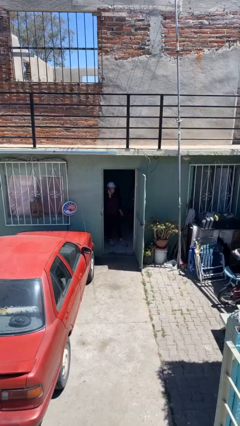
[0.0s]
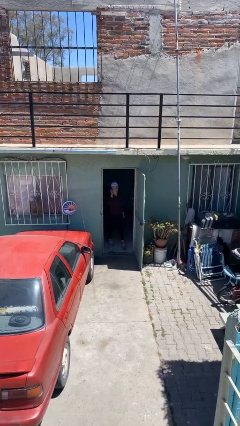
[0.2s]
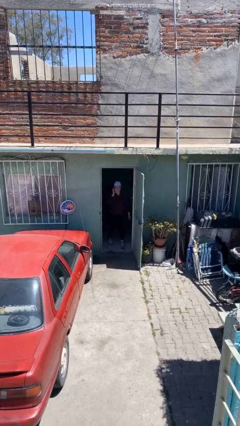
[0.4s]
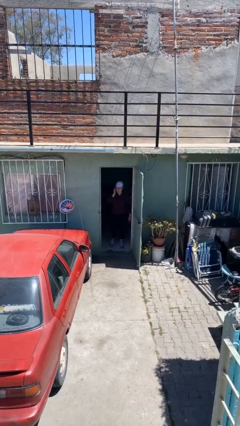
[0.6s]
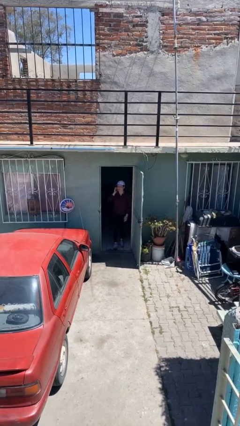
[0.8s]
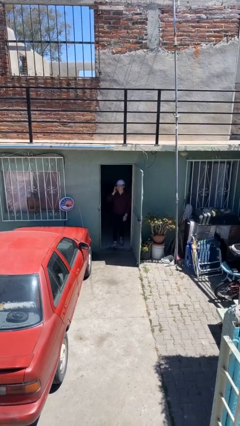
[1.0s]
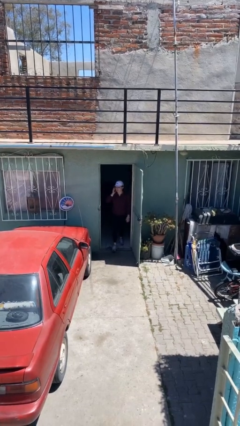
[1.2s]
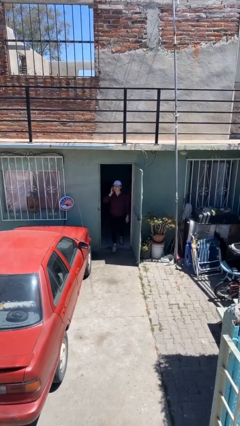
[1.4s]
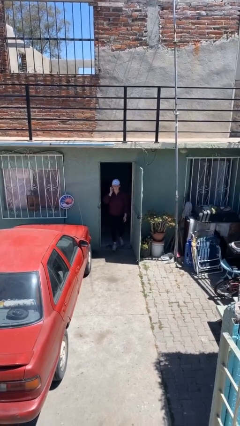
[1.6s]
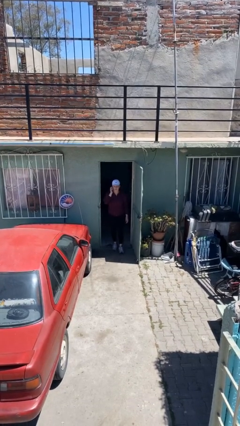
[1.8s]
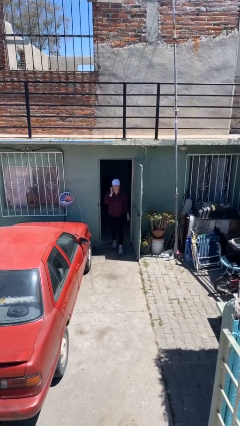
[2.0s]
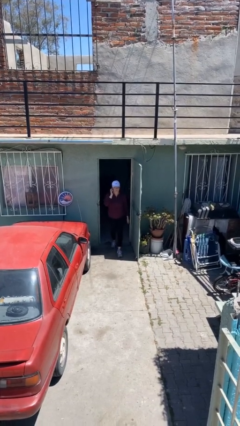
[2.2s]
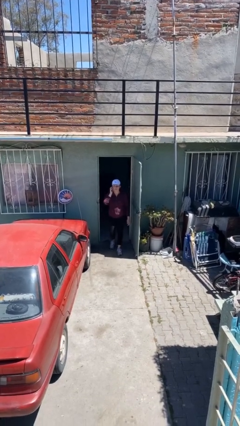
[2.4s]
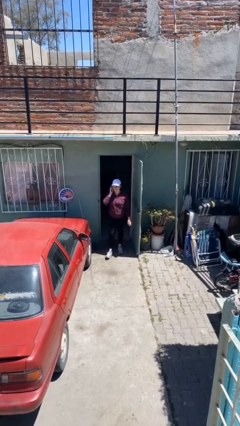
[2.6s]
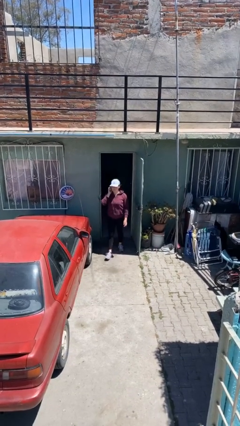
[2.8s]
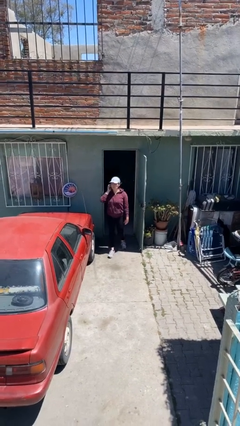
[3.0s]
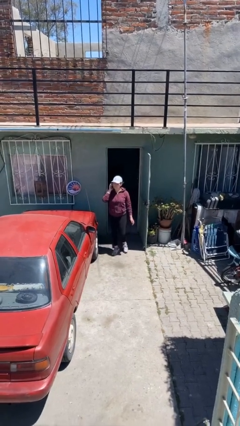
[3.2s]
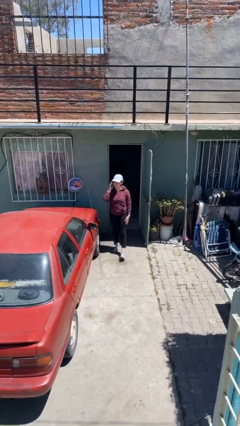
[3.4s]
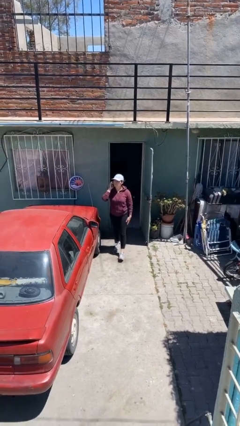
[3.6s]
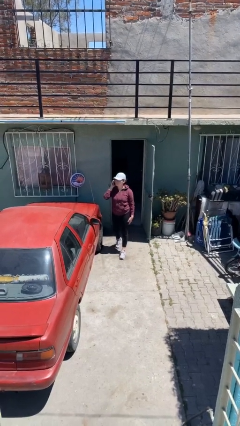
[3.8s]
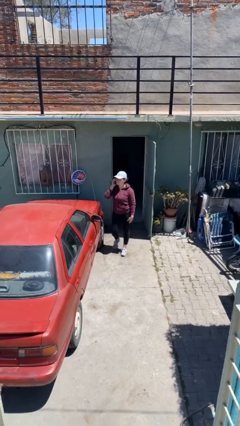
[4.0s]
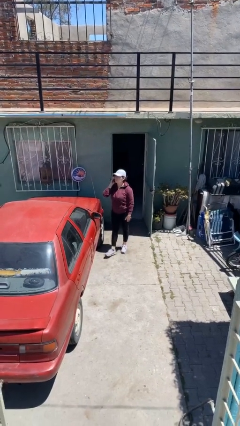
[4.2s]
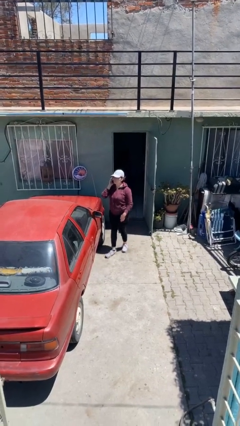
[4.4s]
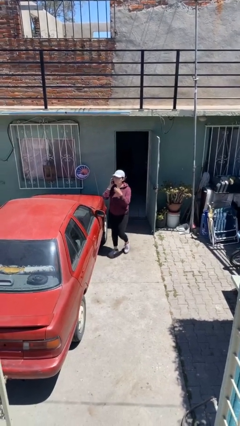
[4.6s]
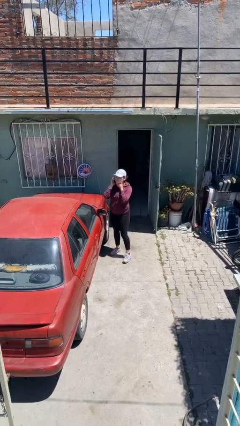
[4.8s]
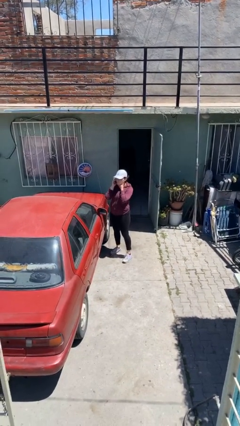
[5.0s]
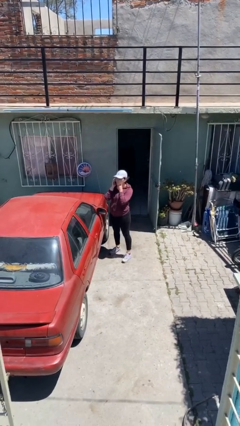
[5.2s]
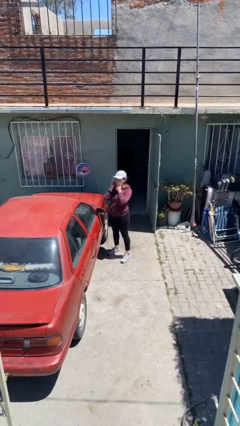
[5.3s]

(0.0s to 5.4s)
person enters scene through structure

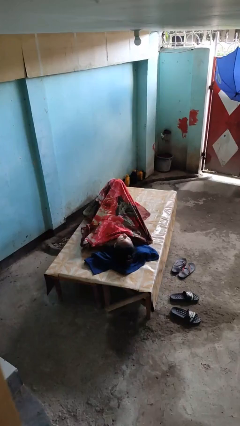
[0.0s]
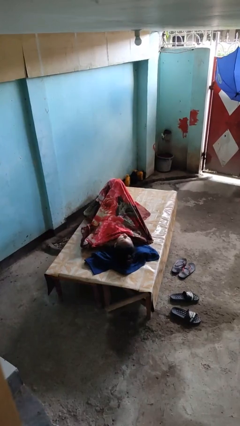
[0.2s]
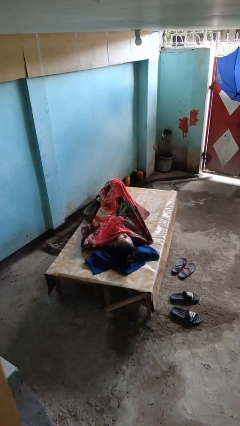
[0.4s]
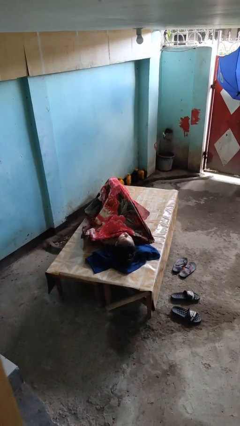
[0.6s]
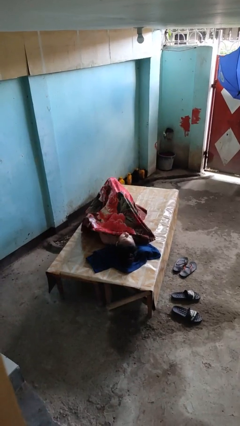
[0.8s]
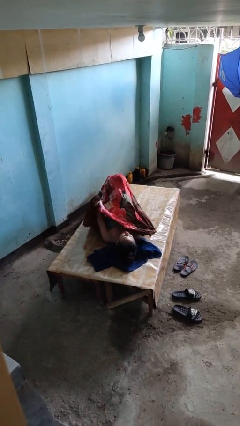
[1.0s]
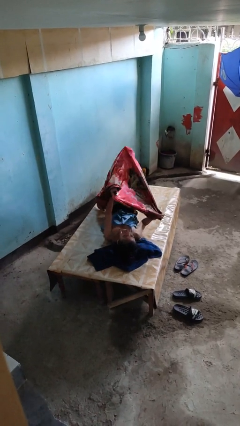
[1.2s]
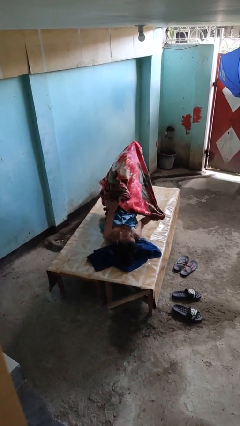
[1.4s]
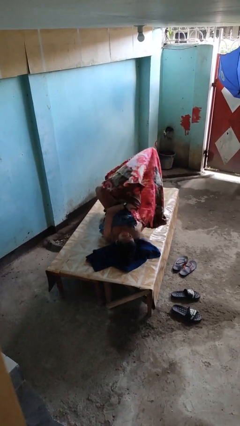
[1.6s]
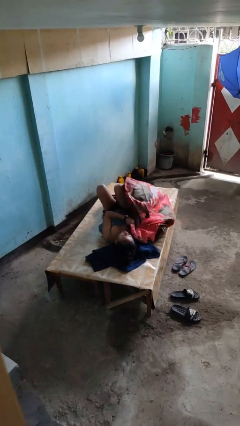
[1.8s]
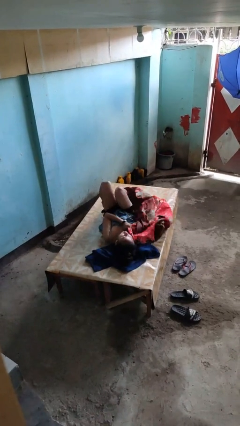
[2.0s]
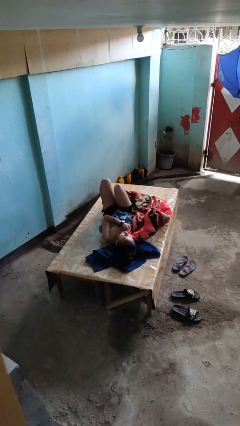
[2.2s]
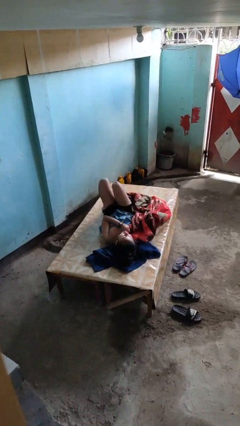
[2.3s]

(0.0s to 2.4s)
person uncovers with blanket

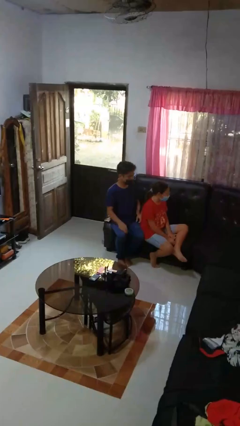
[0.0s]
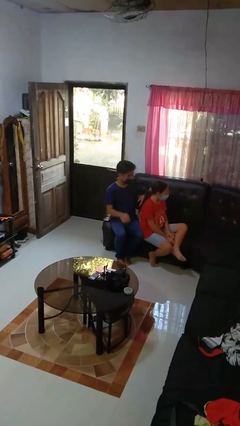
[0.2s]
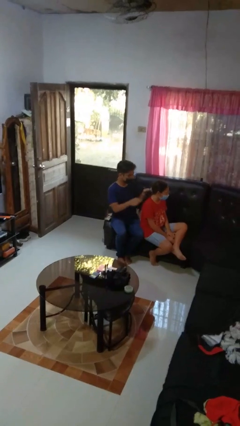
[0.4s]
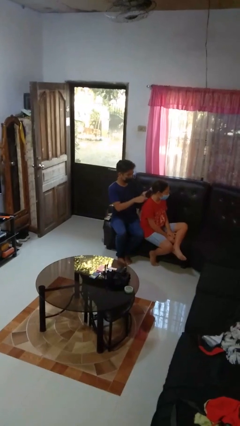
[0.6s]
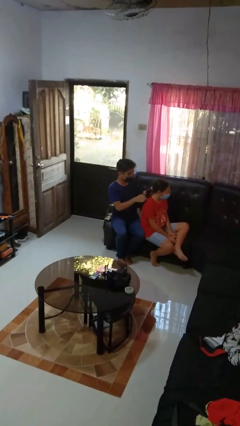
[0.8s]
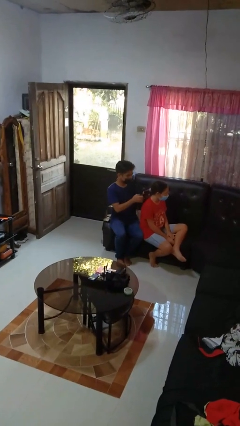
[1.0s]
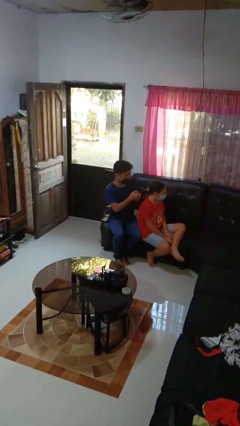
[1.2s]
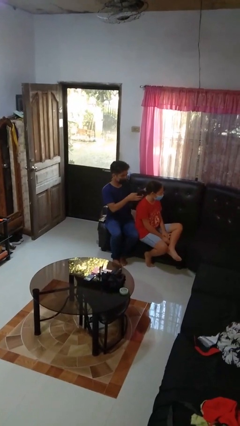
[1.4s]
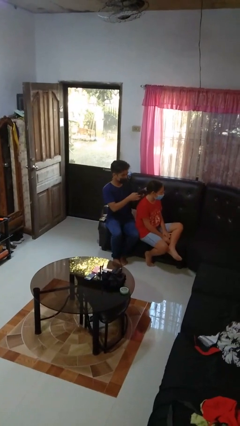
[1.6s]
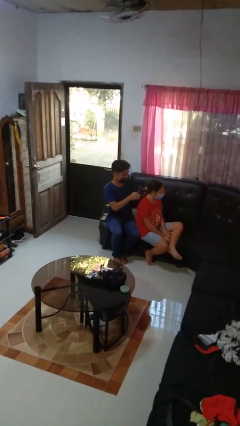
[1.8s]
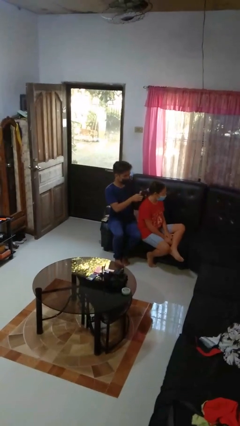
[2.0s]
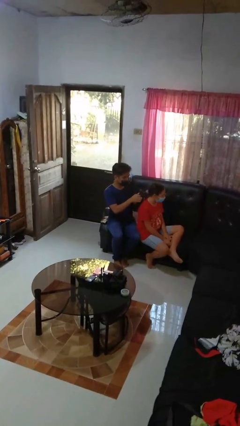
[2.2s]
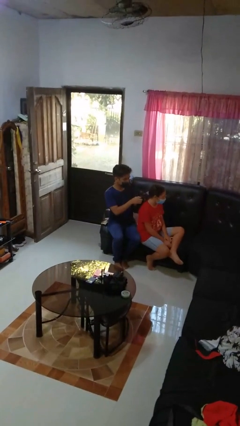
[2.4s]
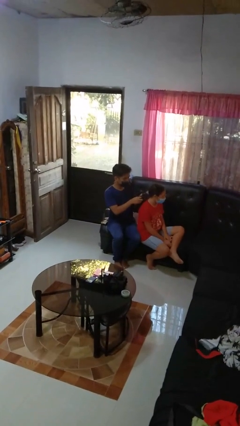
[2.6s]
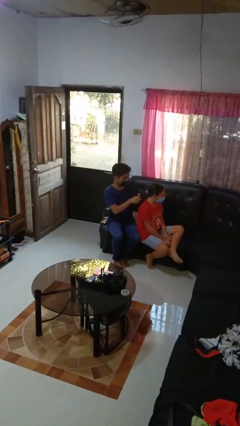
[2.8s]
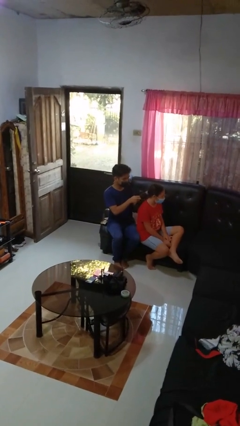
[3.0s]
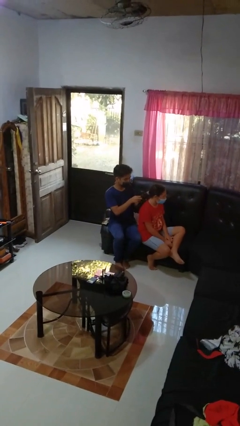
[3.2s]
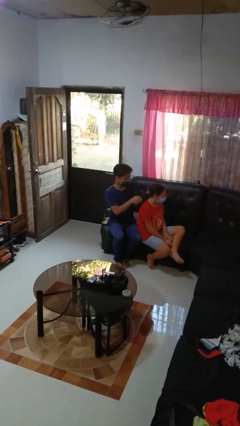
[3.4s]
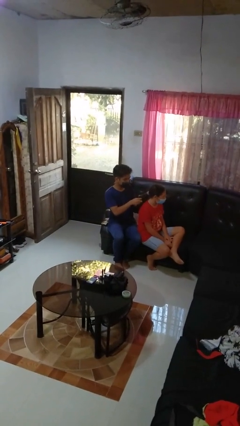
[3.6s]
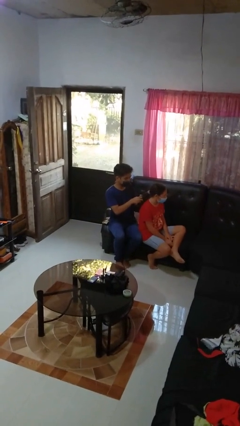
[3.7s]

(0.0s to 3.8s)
person braids hair of person

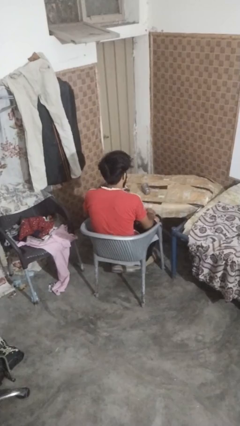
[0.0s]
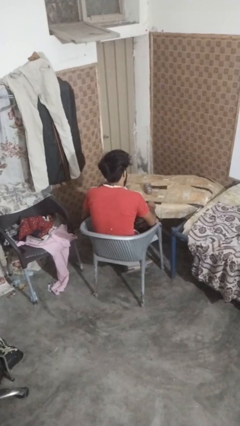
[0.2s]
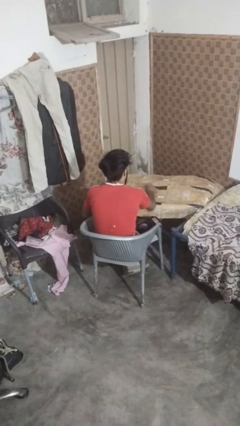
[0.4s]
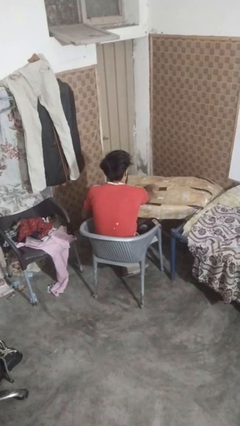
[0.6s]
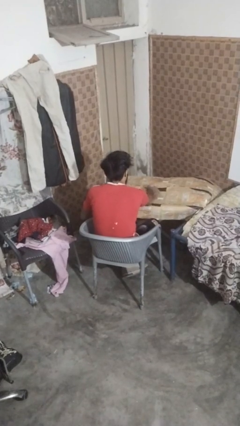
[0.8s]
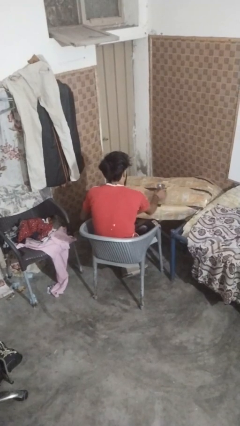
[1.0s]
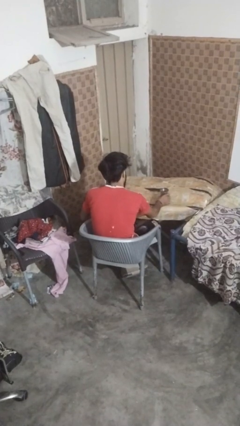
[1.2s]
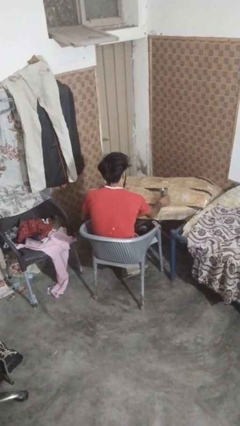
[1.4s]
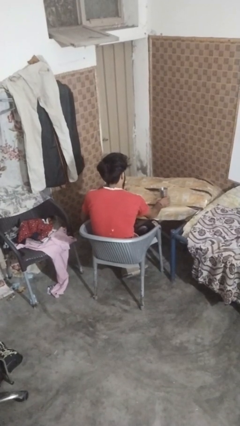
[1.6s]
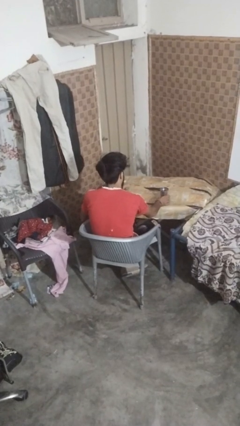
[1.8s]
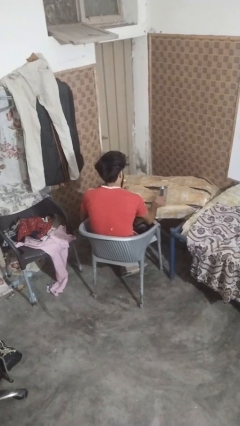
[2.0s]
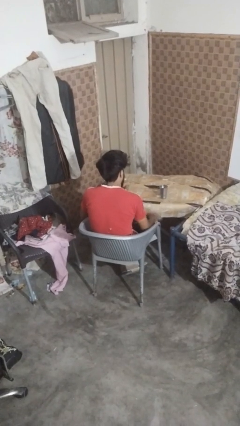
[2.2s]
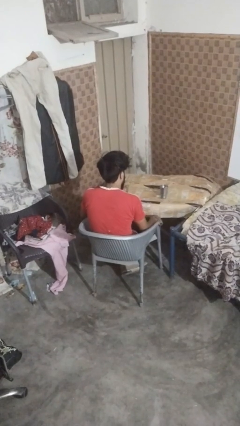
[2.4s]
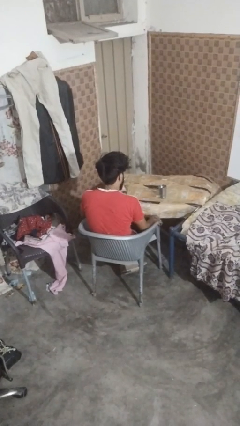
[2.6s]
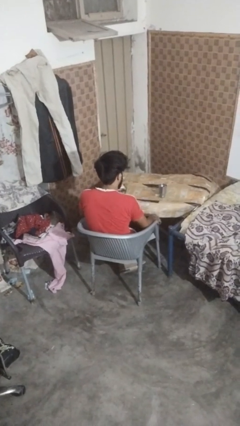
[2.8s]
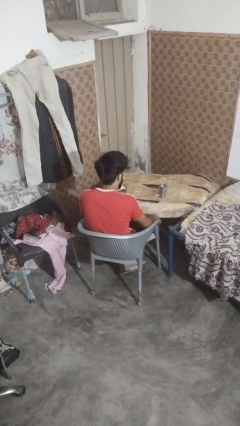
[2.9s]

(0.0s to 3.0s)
person sets upright glass

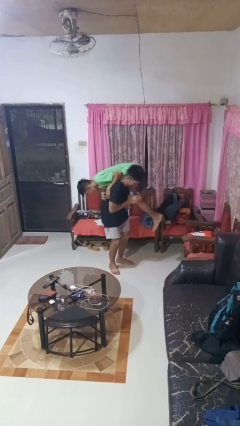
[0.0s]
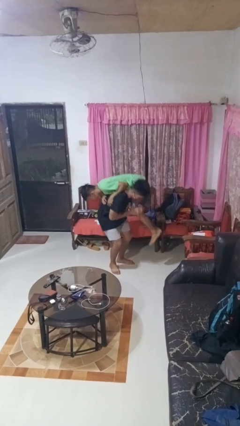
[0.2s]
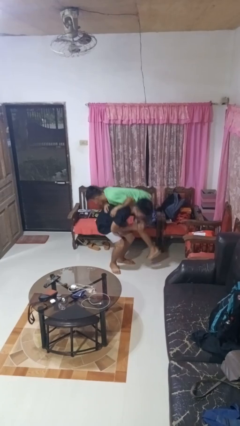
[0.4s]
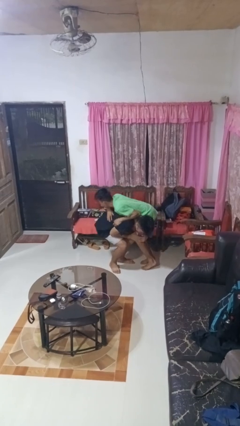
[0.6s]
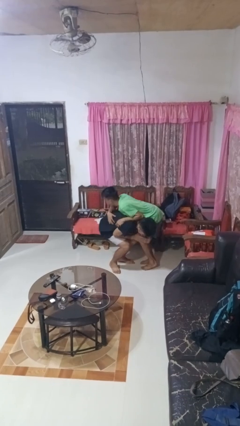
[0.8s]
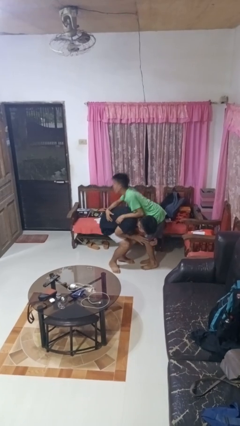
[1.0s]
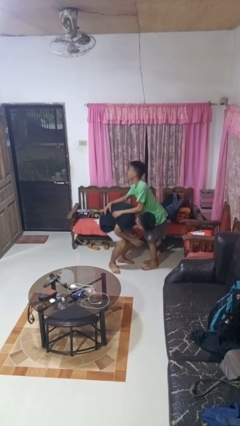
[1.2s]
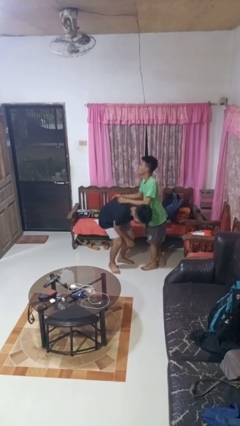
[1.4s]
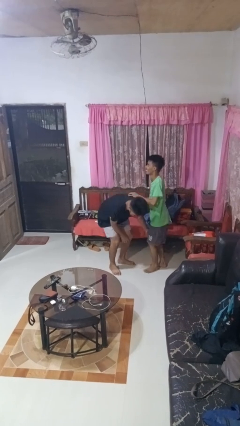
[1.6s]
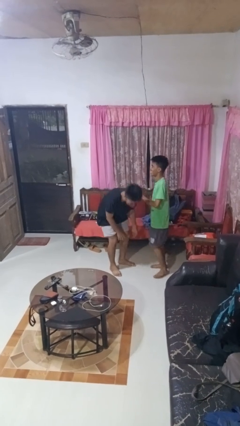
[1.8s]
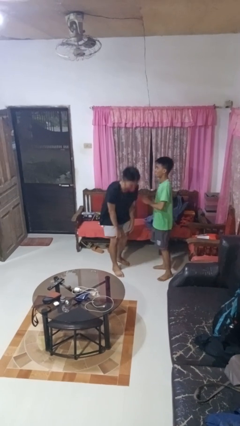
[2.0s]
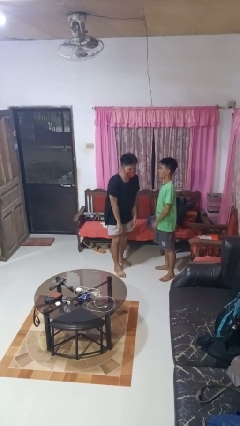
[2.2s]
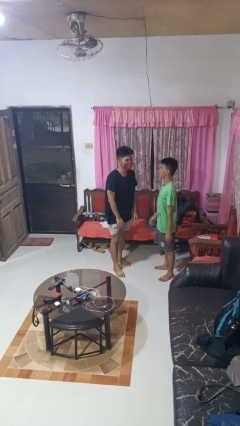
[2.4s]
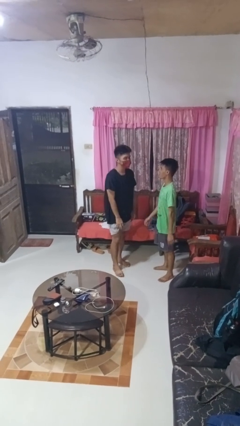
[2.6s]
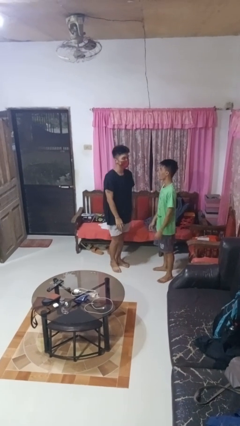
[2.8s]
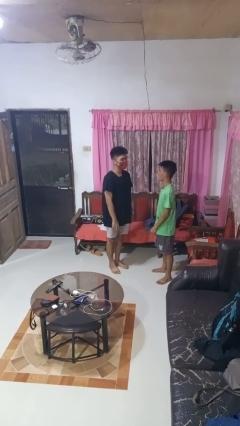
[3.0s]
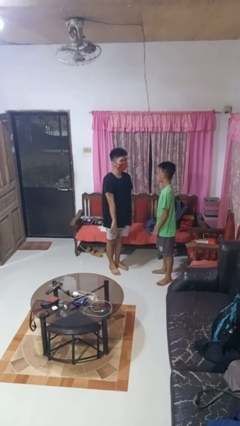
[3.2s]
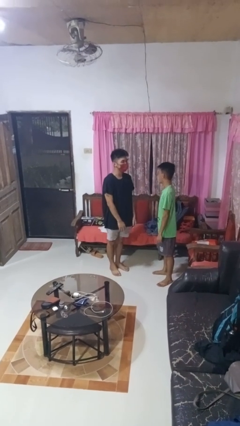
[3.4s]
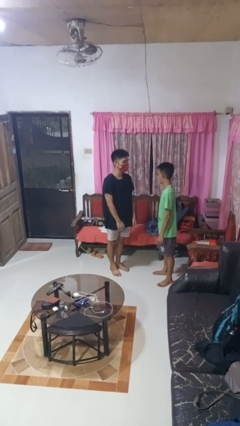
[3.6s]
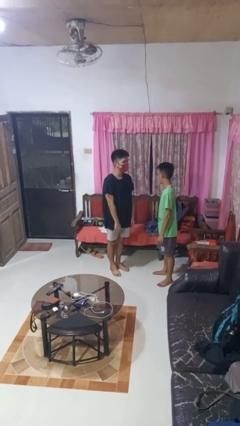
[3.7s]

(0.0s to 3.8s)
person puts down person
